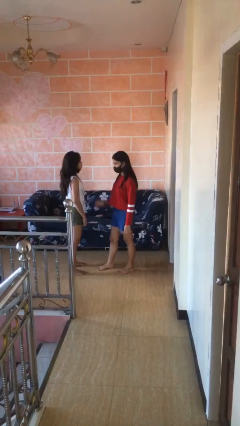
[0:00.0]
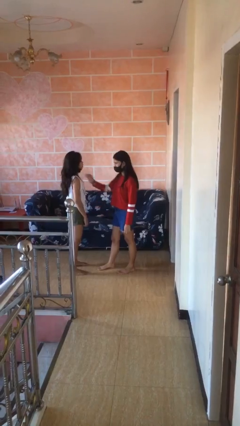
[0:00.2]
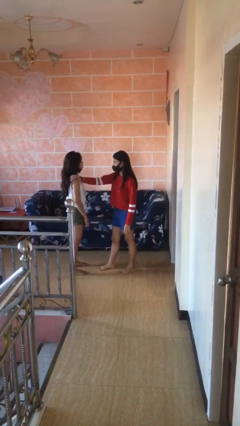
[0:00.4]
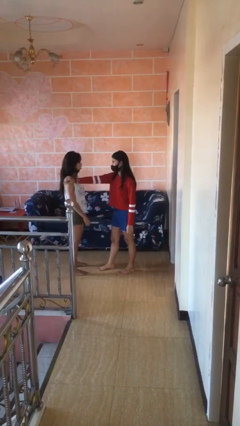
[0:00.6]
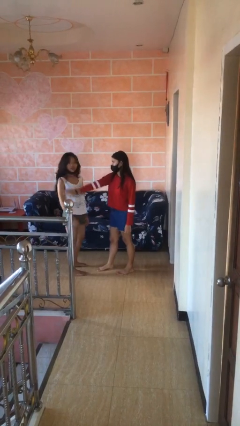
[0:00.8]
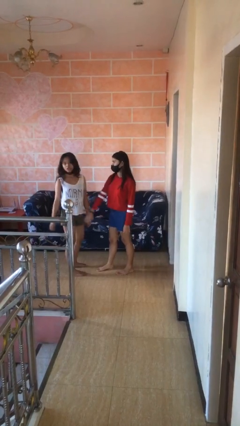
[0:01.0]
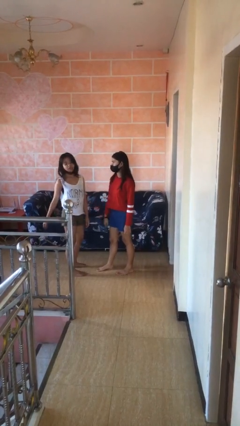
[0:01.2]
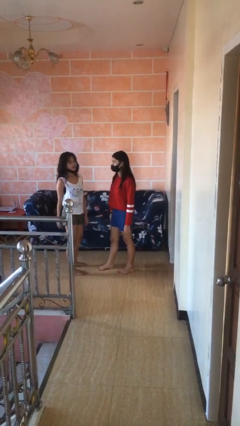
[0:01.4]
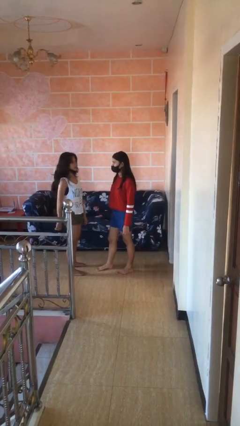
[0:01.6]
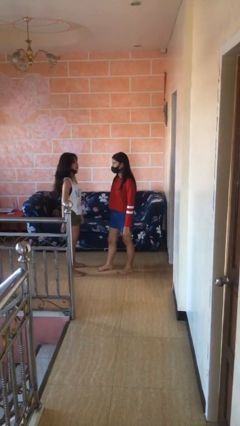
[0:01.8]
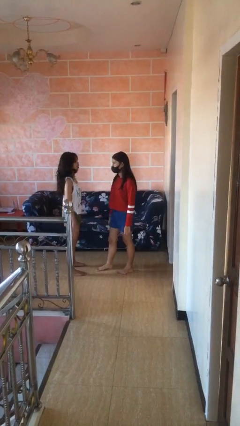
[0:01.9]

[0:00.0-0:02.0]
person shoves person

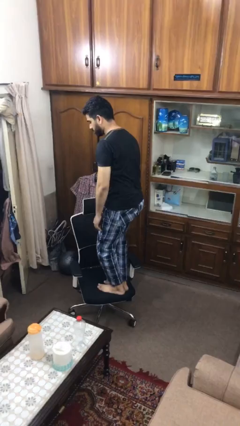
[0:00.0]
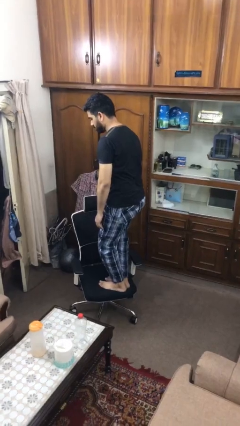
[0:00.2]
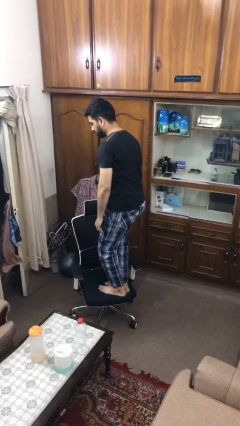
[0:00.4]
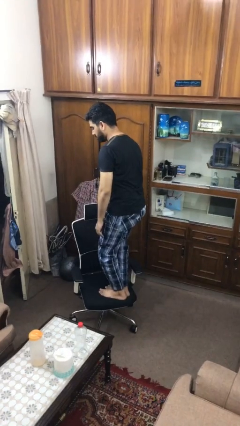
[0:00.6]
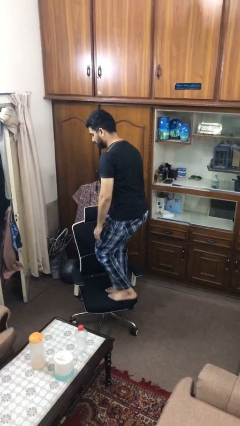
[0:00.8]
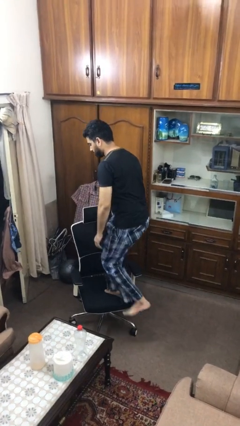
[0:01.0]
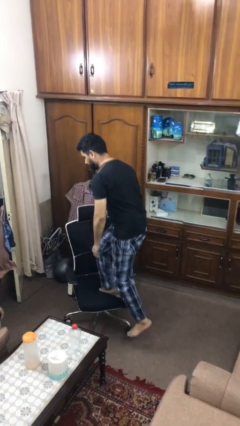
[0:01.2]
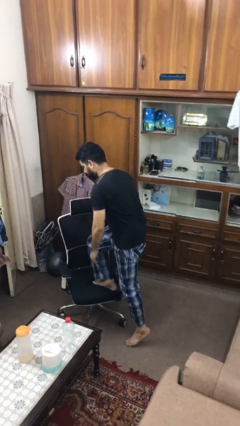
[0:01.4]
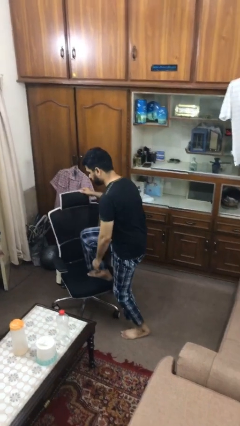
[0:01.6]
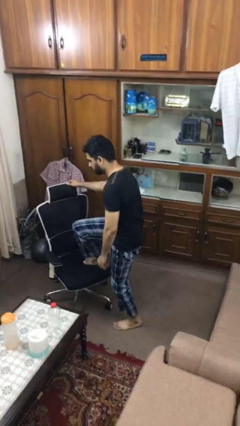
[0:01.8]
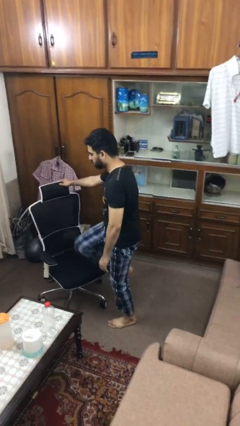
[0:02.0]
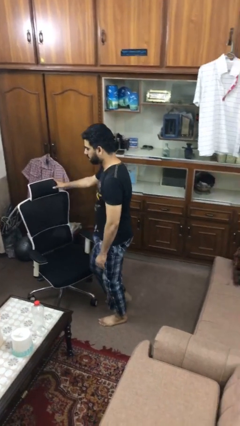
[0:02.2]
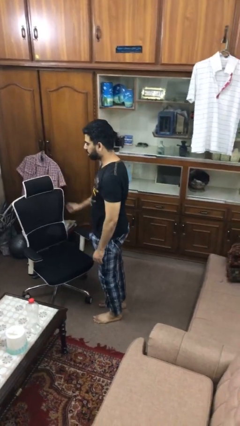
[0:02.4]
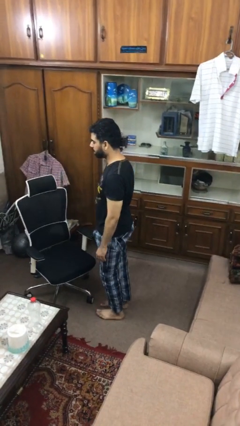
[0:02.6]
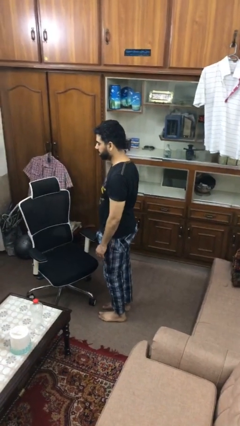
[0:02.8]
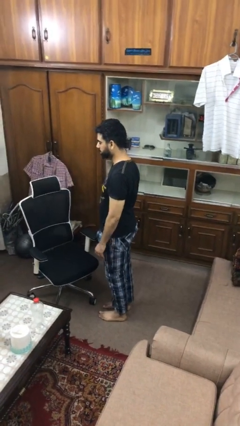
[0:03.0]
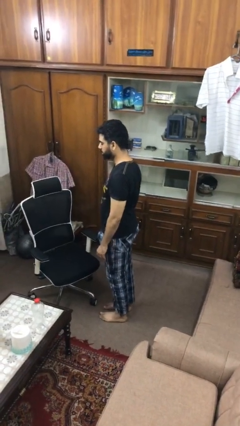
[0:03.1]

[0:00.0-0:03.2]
person climbs off chair

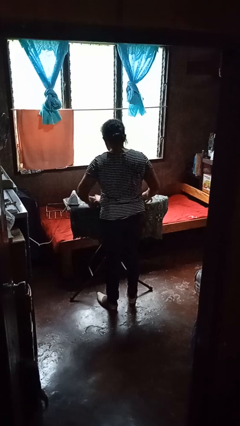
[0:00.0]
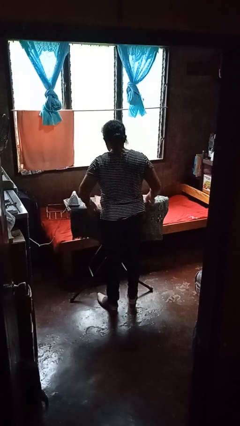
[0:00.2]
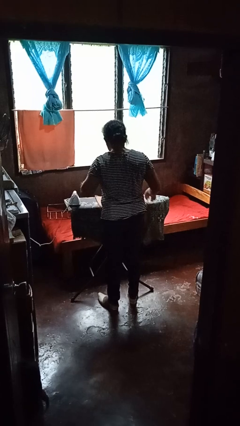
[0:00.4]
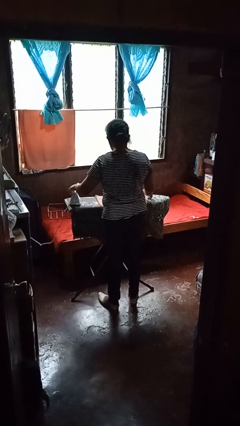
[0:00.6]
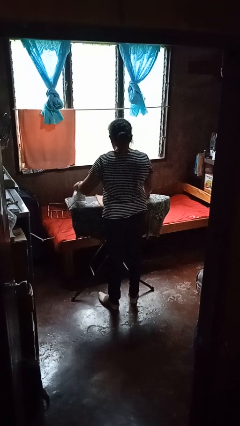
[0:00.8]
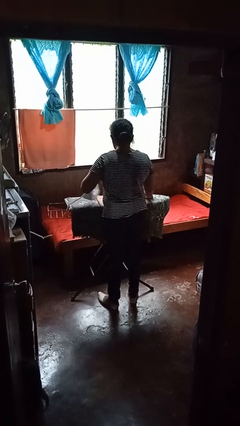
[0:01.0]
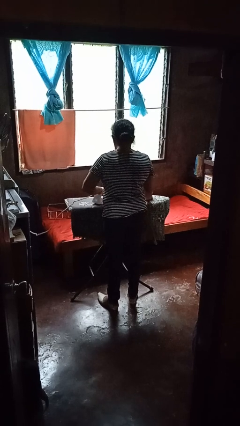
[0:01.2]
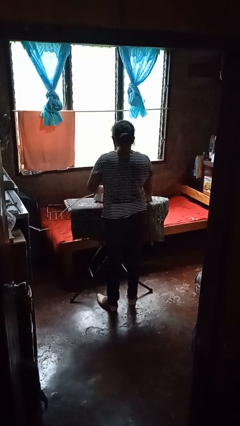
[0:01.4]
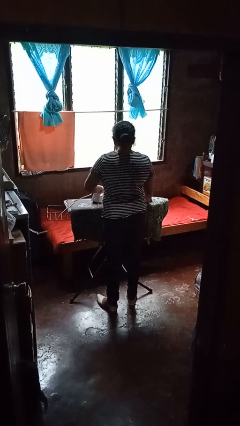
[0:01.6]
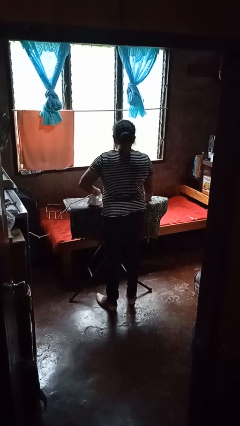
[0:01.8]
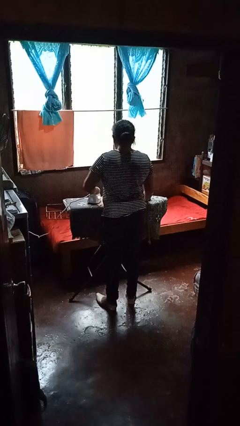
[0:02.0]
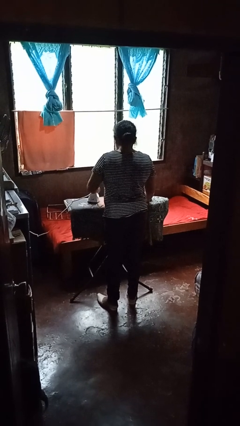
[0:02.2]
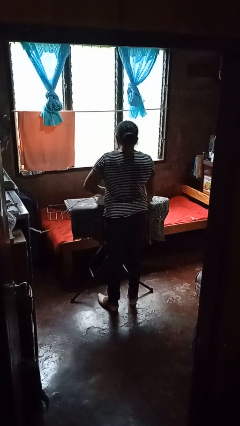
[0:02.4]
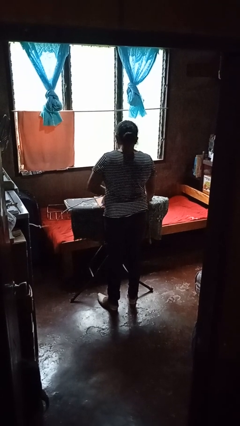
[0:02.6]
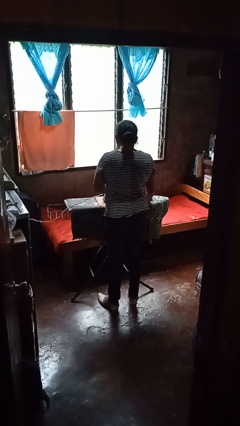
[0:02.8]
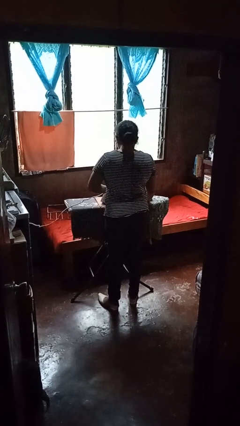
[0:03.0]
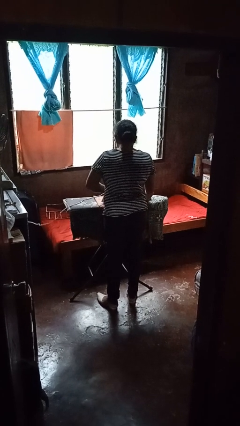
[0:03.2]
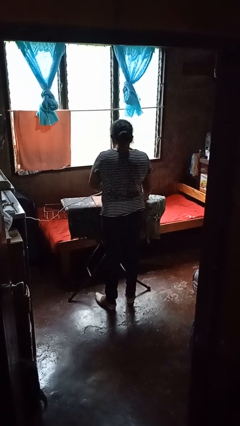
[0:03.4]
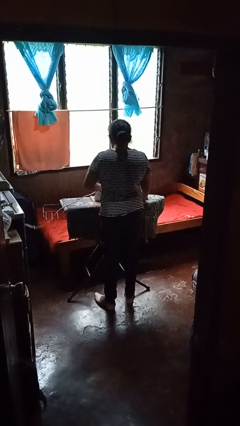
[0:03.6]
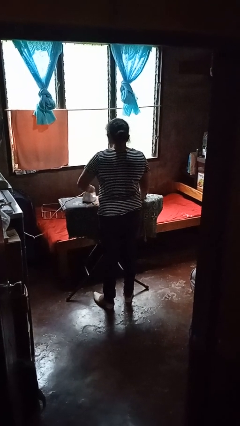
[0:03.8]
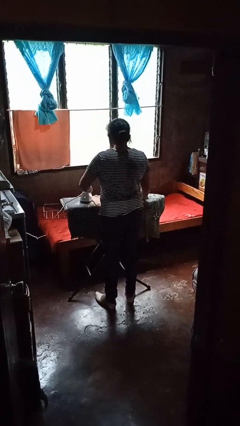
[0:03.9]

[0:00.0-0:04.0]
person irons clothes

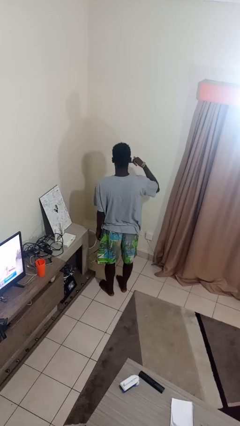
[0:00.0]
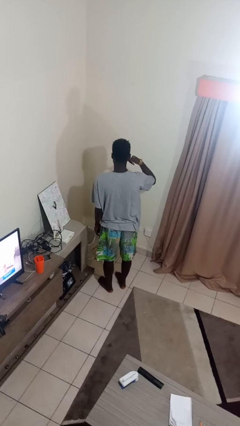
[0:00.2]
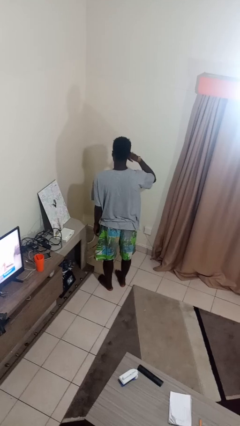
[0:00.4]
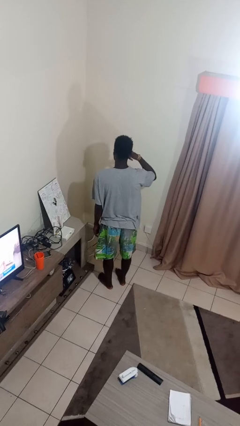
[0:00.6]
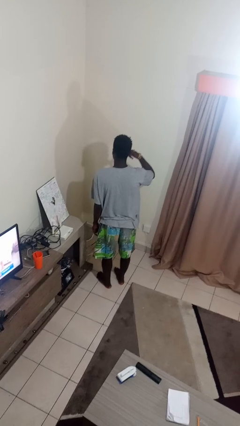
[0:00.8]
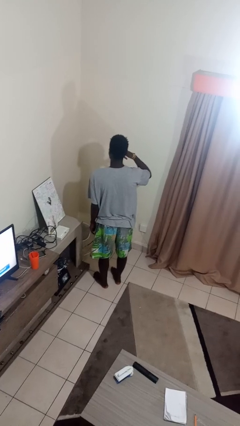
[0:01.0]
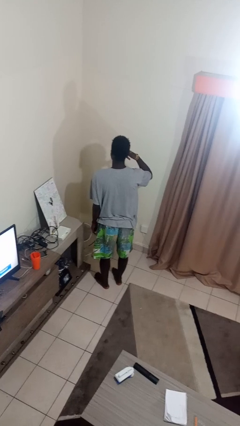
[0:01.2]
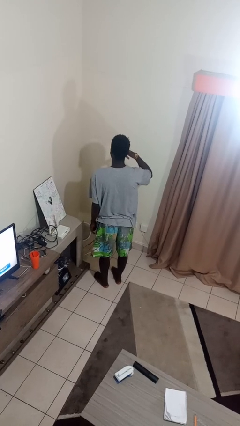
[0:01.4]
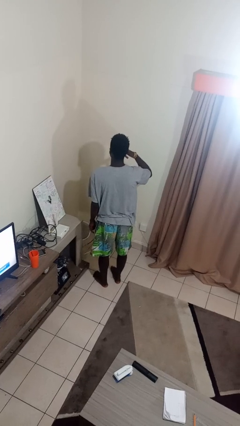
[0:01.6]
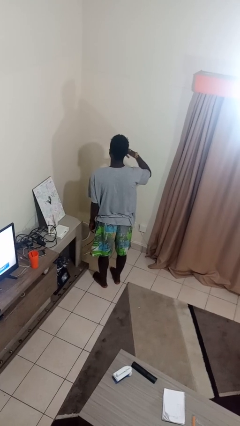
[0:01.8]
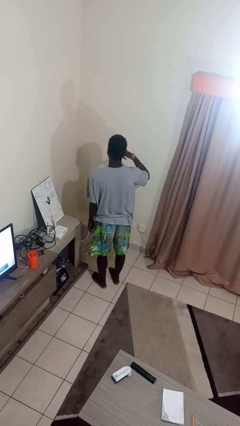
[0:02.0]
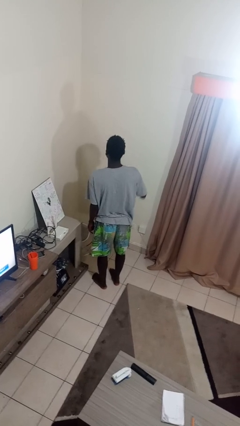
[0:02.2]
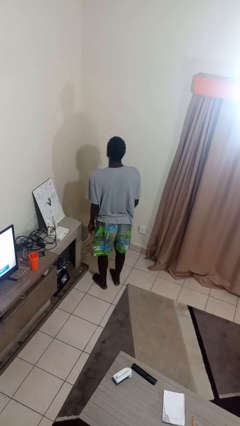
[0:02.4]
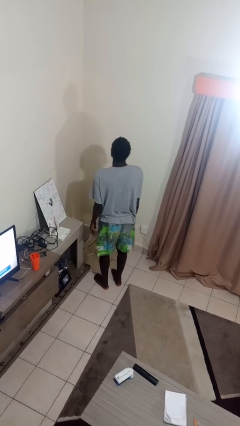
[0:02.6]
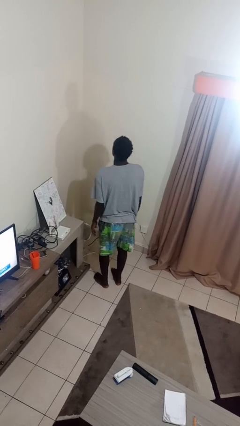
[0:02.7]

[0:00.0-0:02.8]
person gestures call me

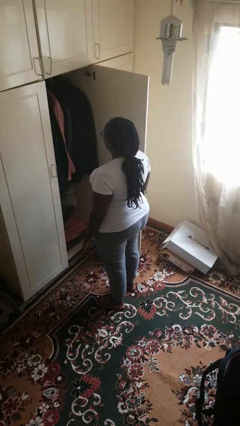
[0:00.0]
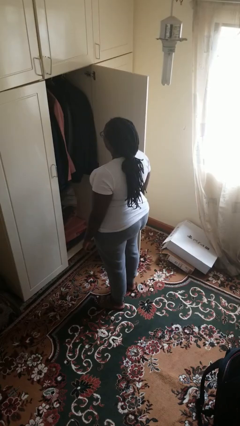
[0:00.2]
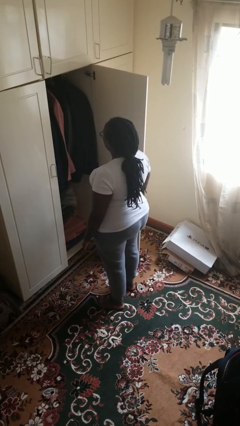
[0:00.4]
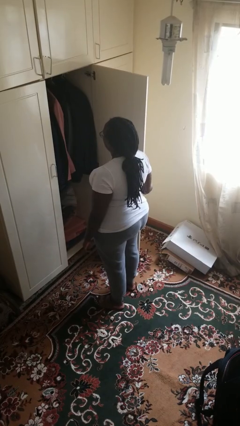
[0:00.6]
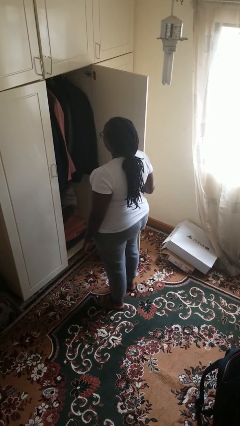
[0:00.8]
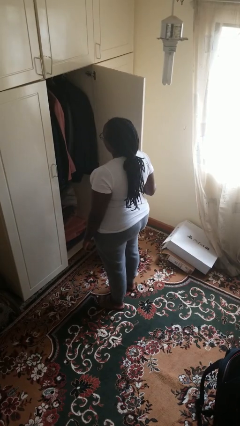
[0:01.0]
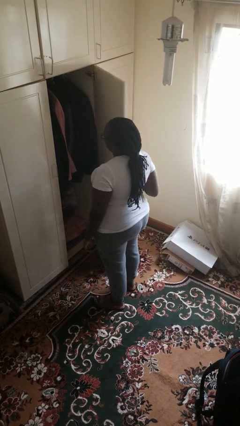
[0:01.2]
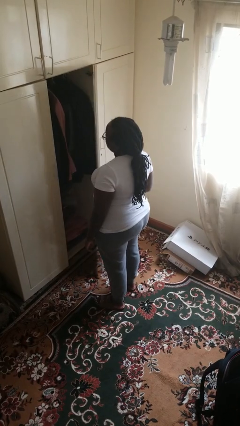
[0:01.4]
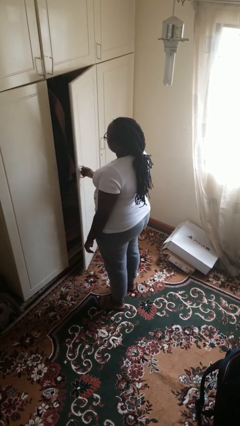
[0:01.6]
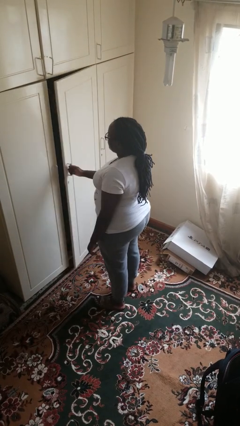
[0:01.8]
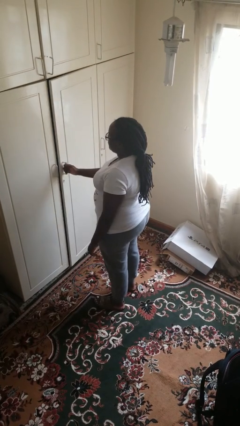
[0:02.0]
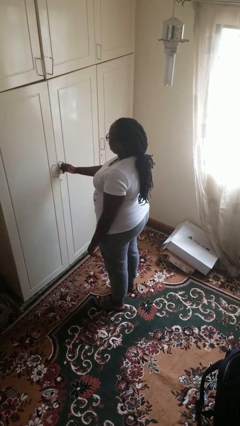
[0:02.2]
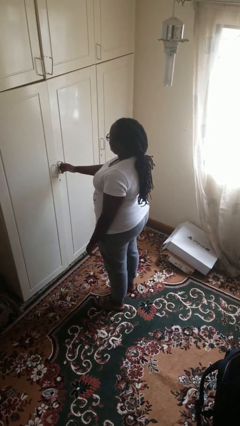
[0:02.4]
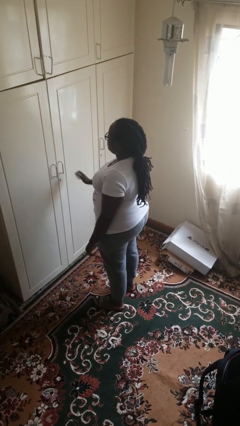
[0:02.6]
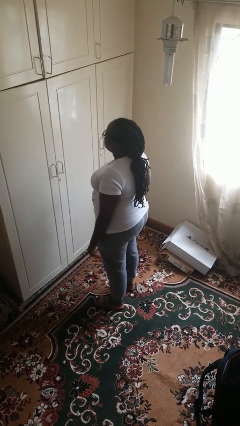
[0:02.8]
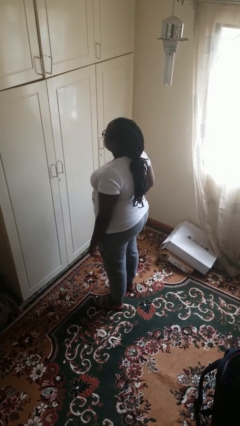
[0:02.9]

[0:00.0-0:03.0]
person closes closet door

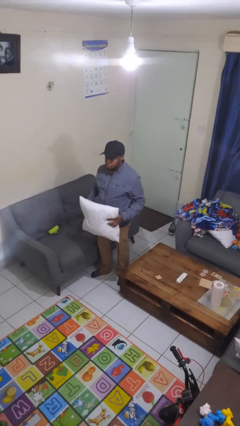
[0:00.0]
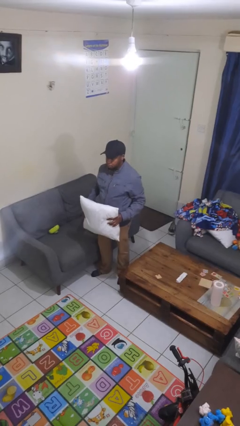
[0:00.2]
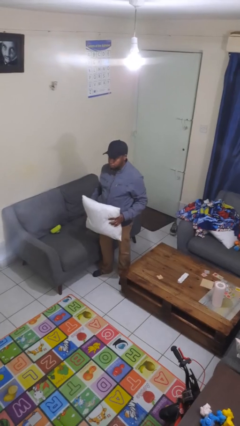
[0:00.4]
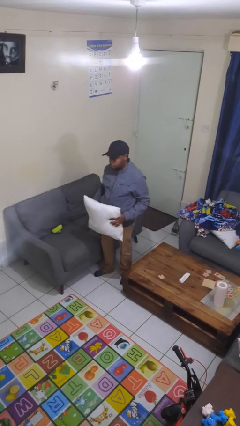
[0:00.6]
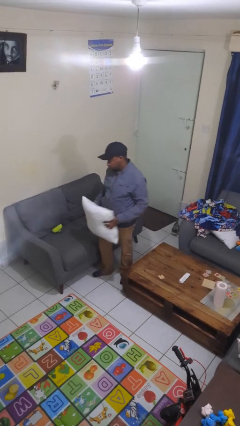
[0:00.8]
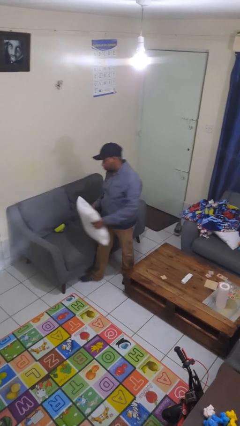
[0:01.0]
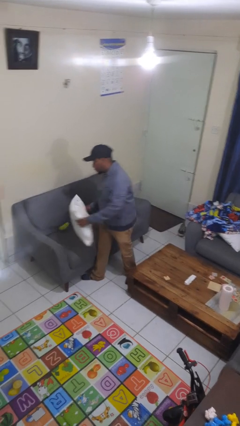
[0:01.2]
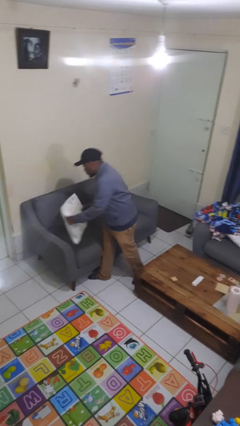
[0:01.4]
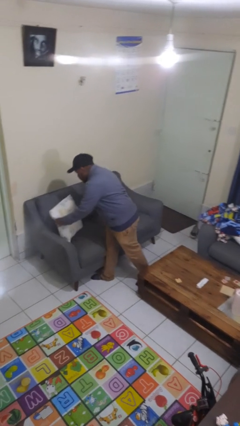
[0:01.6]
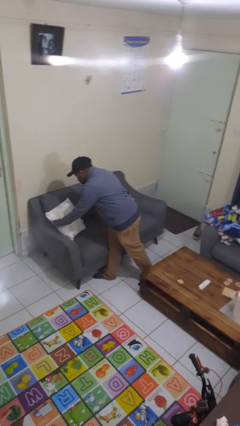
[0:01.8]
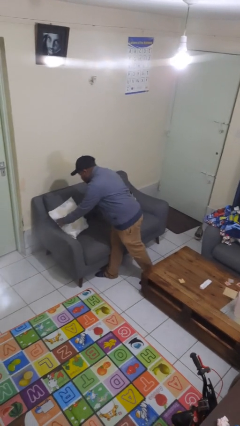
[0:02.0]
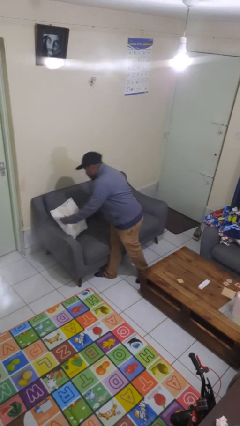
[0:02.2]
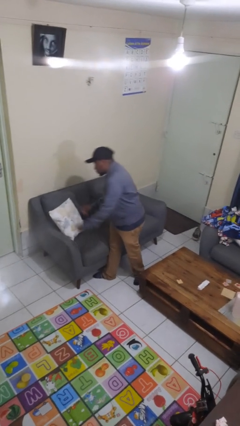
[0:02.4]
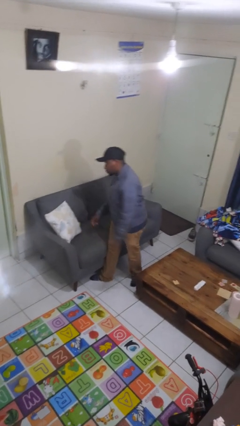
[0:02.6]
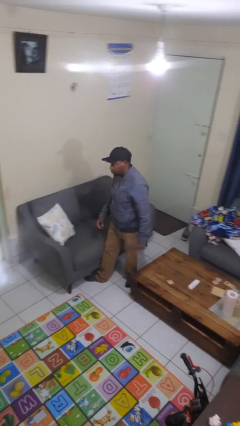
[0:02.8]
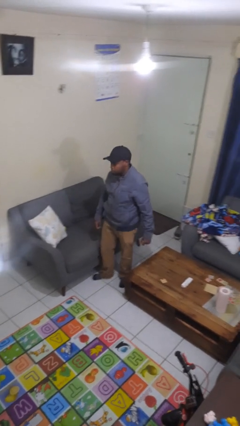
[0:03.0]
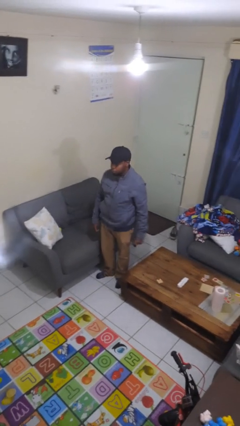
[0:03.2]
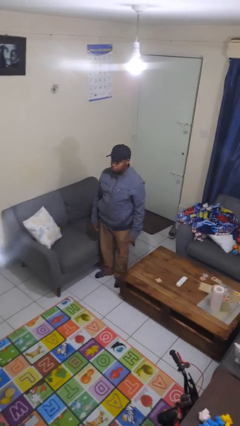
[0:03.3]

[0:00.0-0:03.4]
person puts down object on couch
